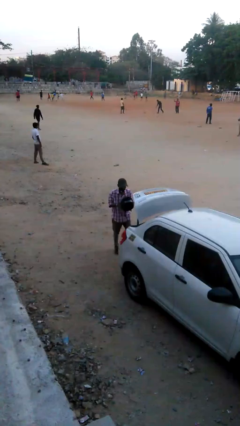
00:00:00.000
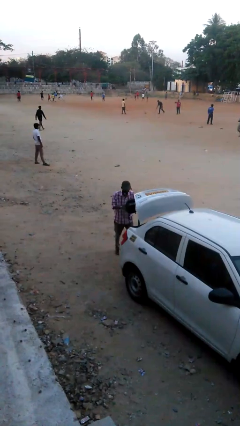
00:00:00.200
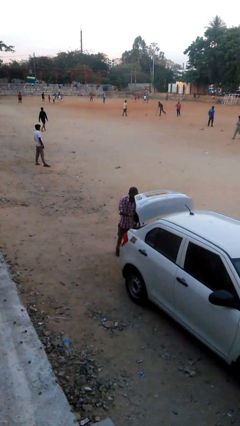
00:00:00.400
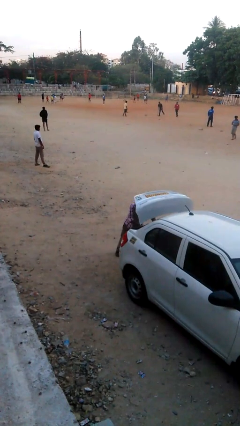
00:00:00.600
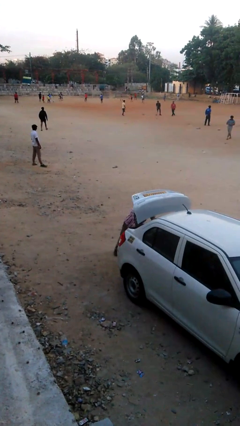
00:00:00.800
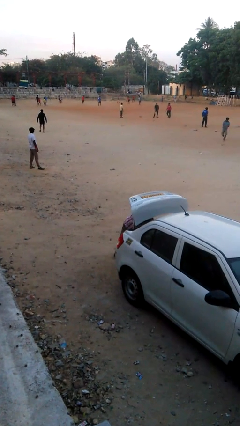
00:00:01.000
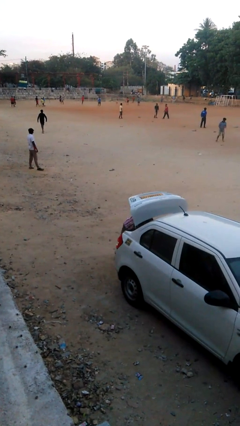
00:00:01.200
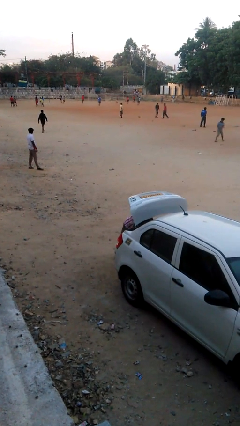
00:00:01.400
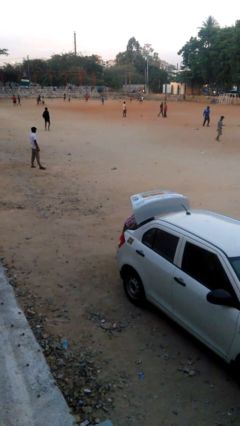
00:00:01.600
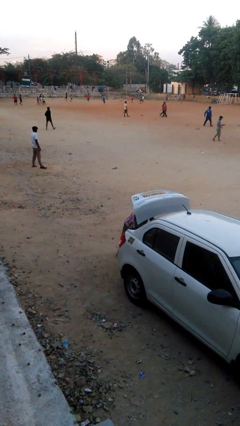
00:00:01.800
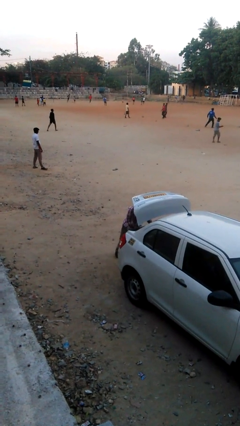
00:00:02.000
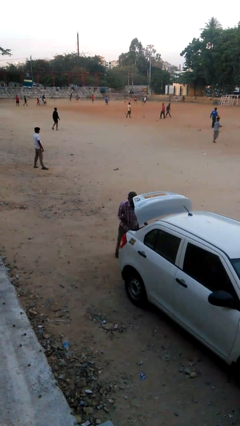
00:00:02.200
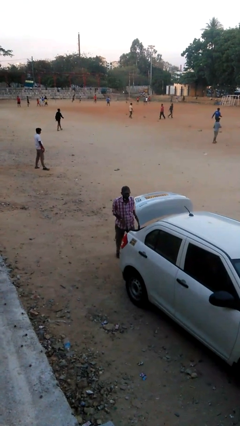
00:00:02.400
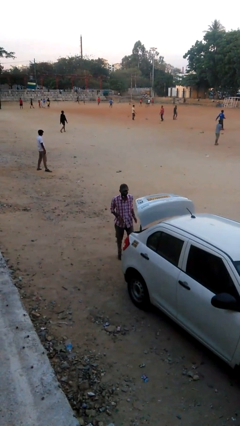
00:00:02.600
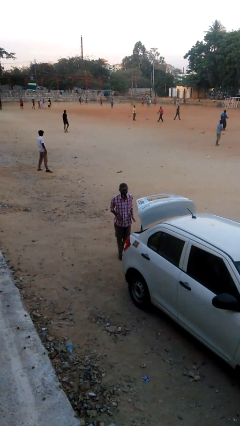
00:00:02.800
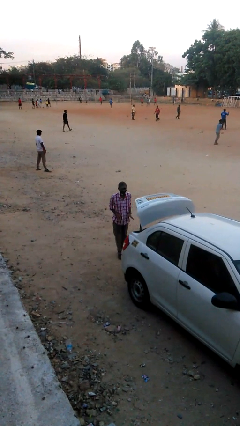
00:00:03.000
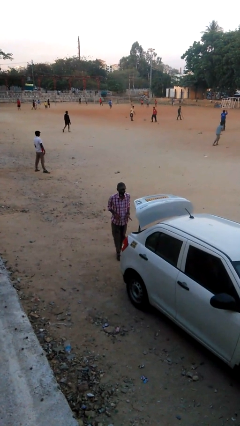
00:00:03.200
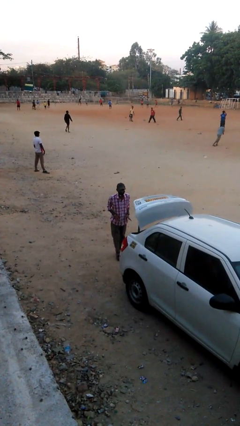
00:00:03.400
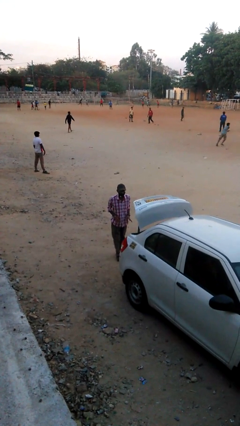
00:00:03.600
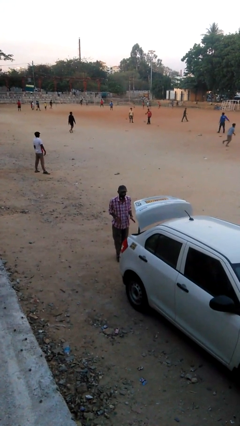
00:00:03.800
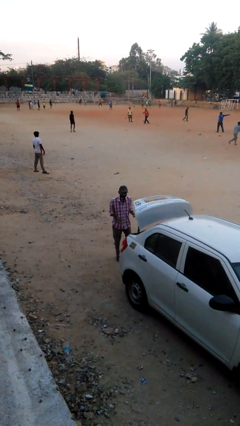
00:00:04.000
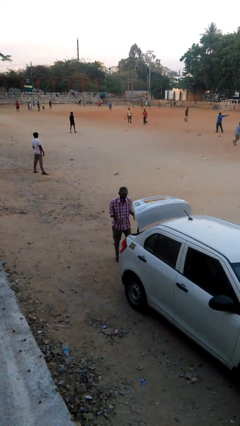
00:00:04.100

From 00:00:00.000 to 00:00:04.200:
person loads car

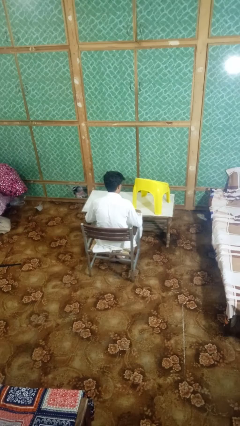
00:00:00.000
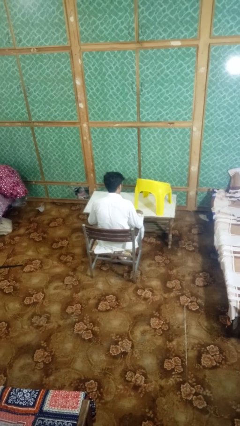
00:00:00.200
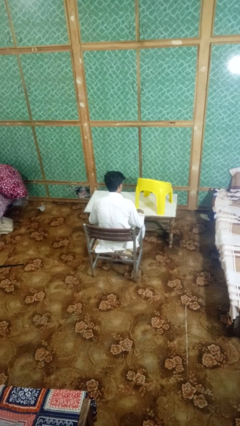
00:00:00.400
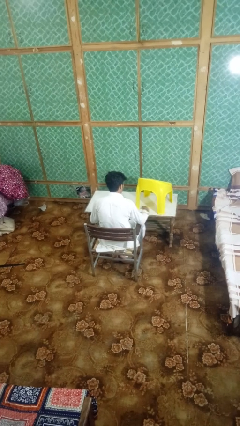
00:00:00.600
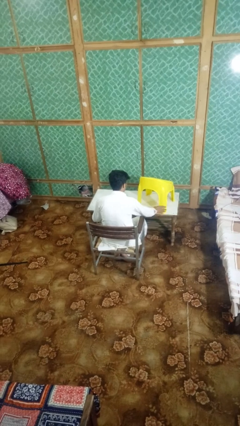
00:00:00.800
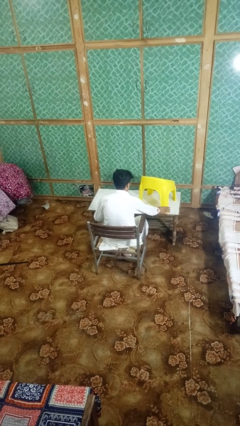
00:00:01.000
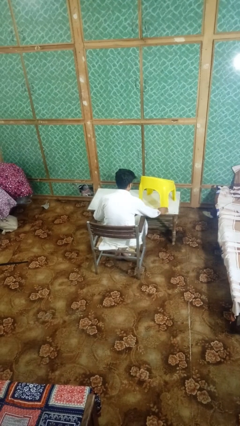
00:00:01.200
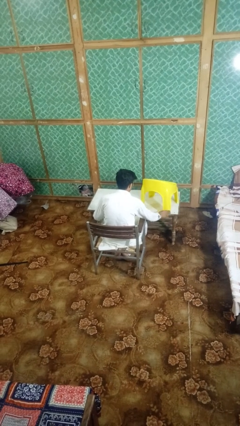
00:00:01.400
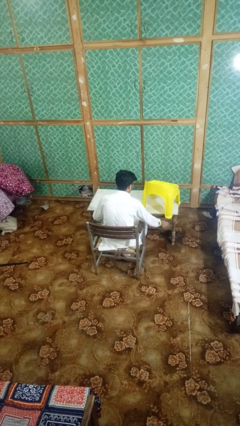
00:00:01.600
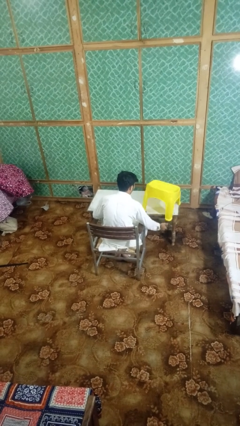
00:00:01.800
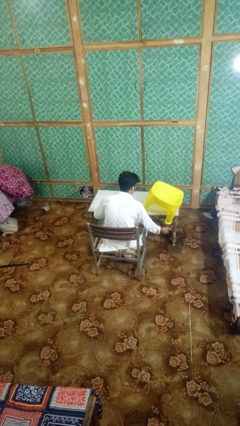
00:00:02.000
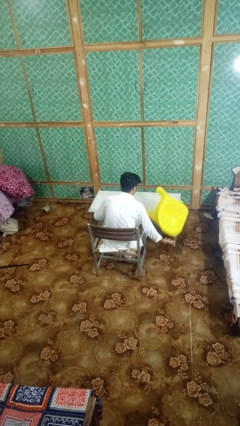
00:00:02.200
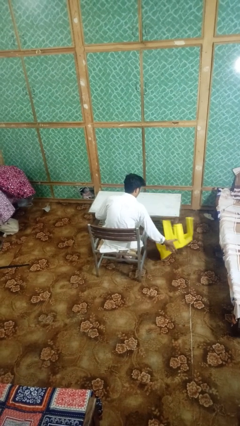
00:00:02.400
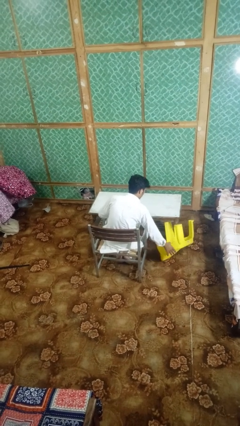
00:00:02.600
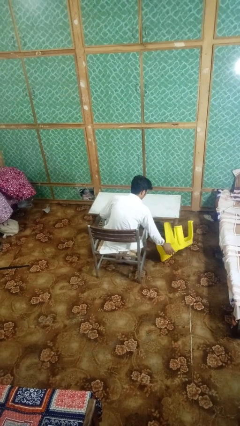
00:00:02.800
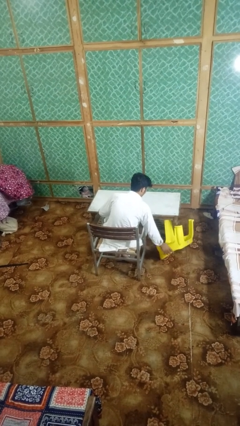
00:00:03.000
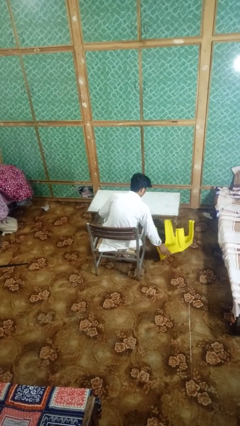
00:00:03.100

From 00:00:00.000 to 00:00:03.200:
person knocks over furniture

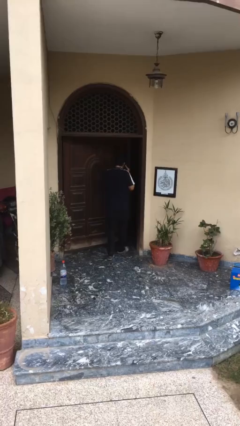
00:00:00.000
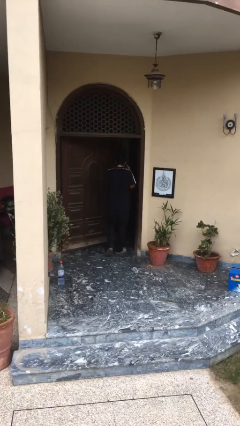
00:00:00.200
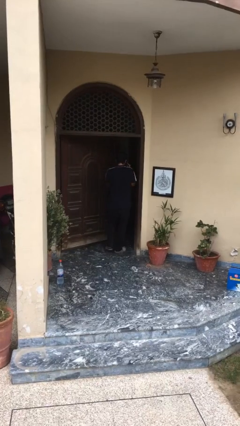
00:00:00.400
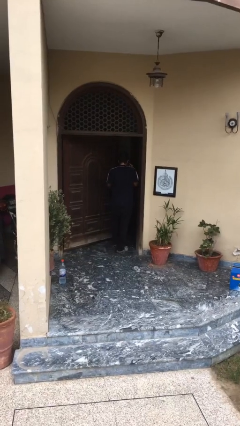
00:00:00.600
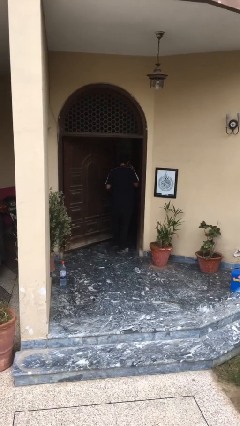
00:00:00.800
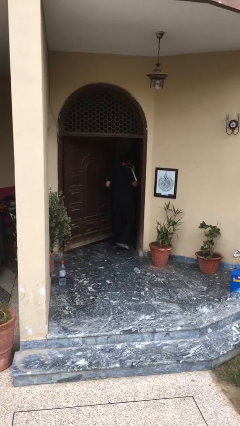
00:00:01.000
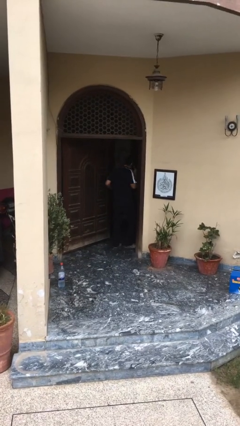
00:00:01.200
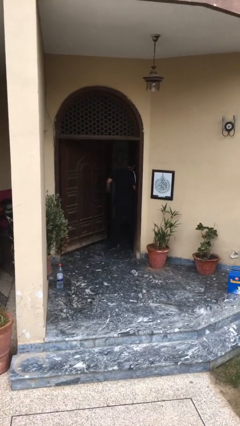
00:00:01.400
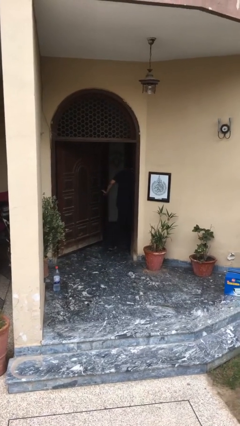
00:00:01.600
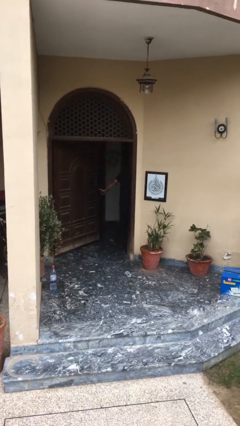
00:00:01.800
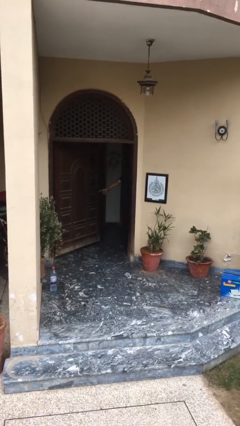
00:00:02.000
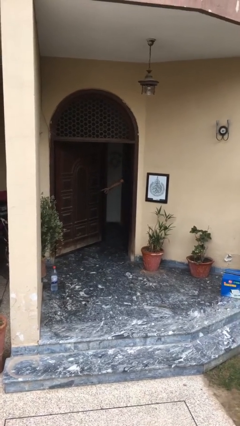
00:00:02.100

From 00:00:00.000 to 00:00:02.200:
person exits scene through structure

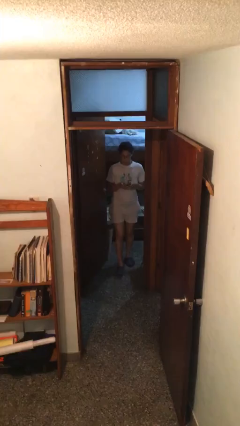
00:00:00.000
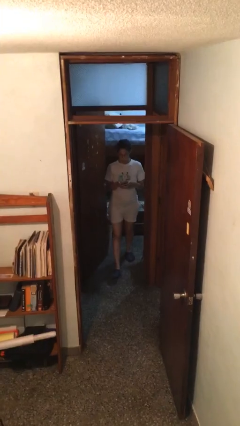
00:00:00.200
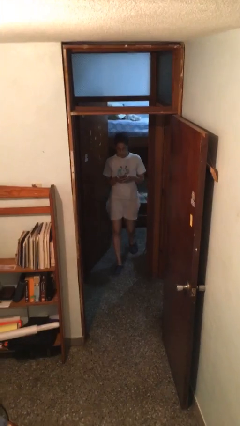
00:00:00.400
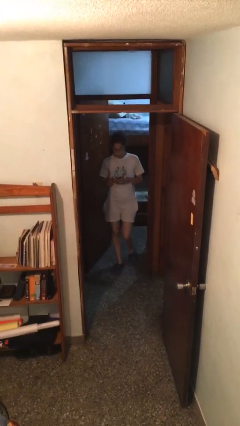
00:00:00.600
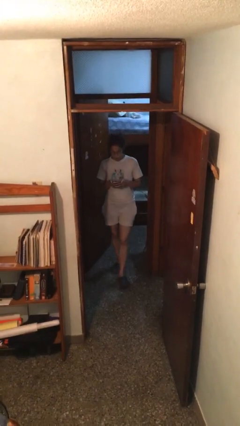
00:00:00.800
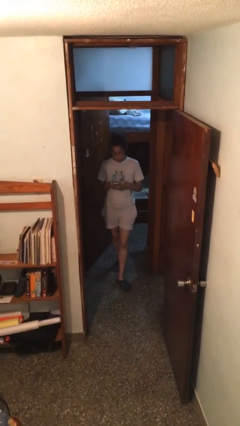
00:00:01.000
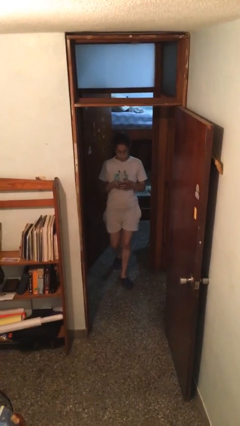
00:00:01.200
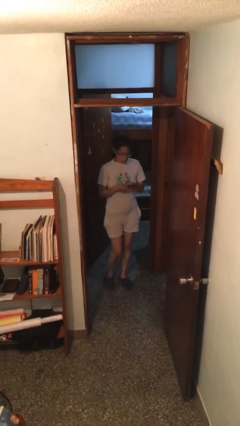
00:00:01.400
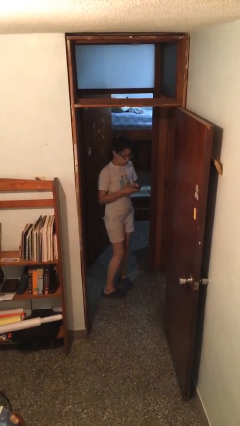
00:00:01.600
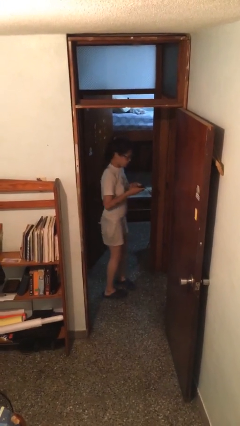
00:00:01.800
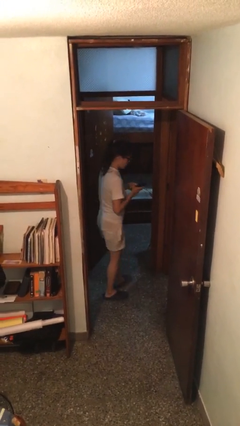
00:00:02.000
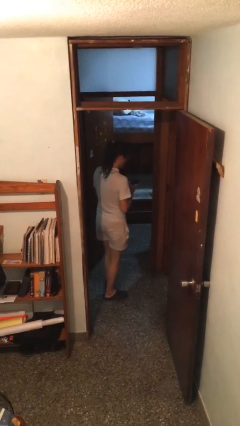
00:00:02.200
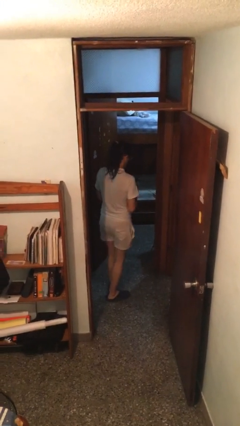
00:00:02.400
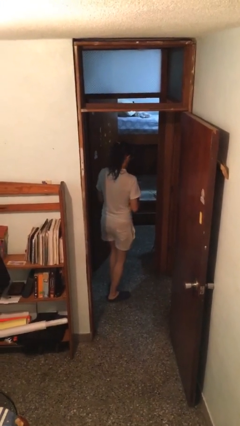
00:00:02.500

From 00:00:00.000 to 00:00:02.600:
person enters scene through structure

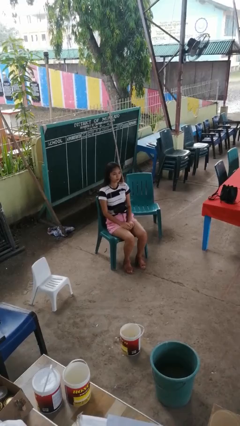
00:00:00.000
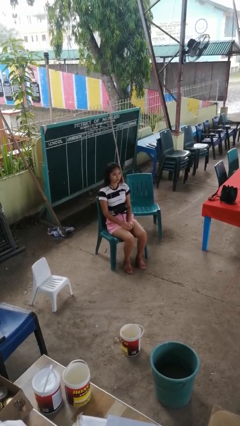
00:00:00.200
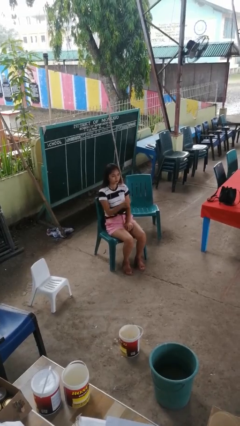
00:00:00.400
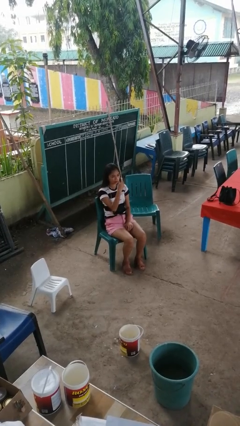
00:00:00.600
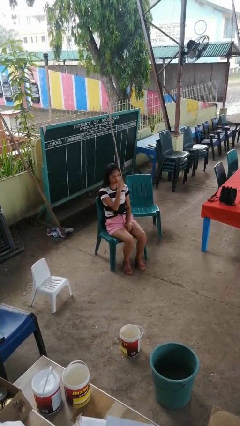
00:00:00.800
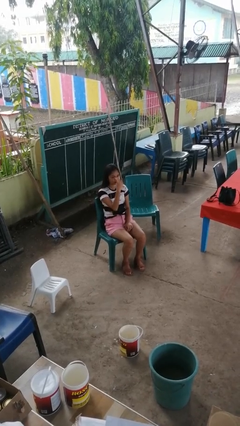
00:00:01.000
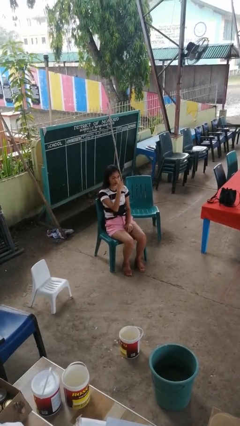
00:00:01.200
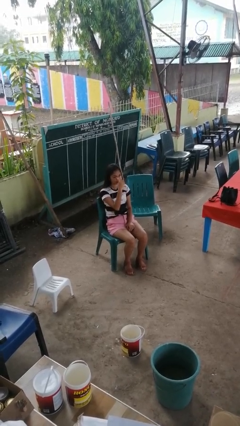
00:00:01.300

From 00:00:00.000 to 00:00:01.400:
person gestures watch closely

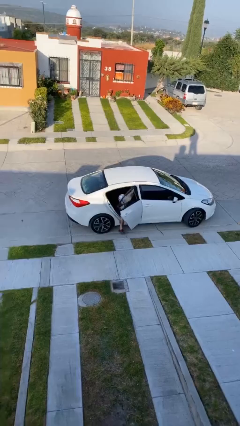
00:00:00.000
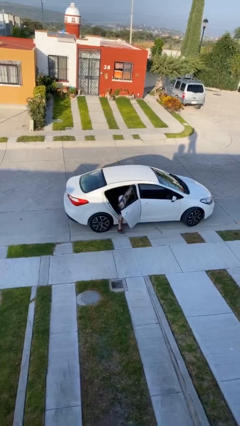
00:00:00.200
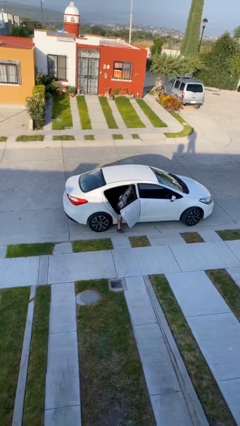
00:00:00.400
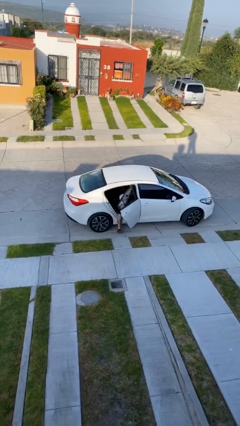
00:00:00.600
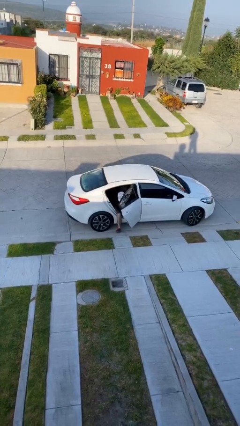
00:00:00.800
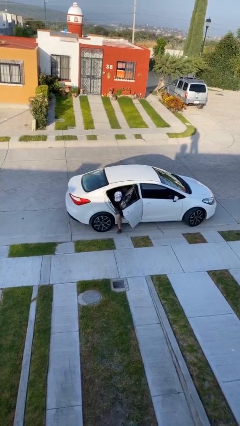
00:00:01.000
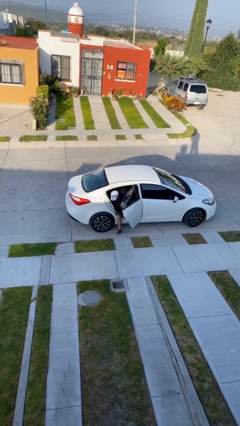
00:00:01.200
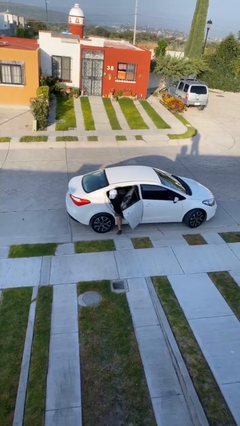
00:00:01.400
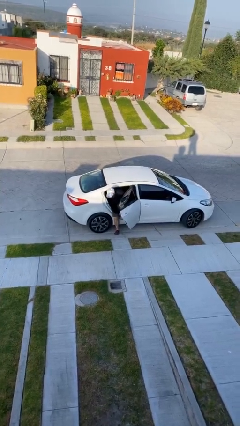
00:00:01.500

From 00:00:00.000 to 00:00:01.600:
person opens car door

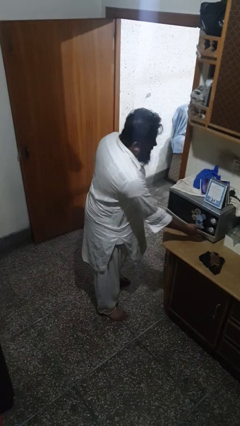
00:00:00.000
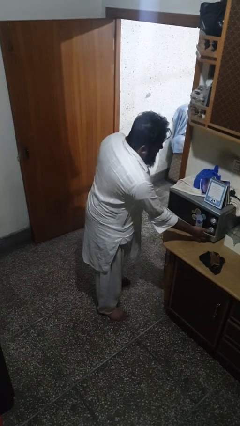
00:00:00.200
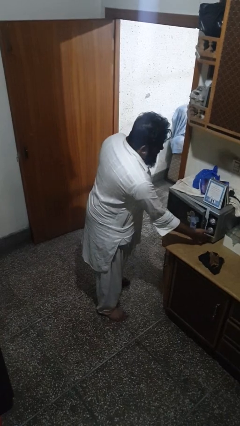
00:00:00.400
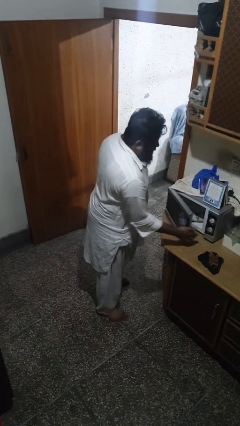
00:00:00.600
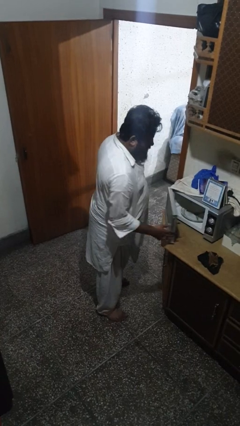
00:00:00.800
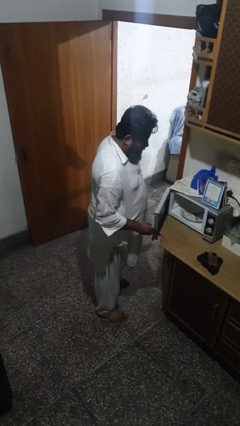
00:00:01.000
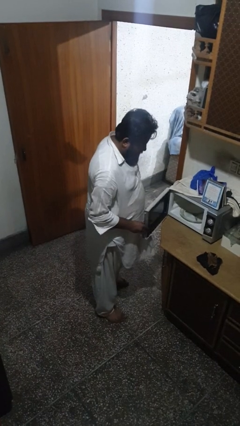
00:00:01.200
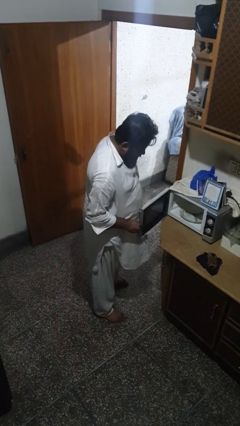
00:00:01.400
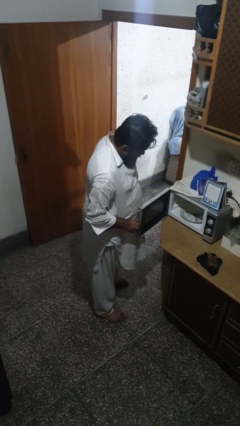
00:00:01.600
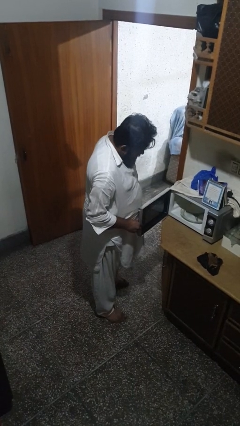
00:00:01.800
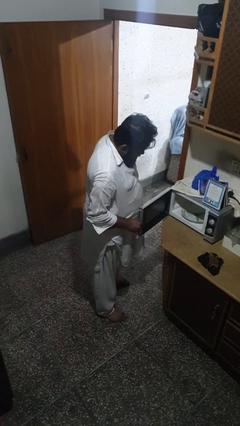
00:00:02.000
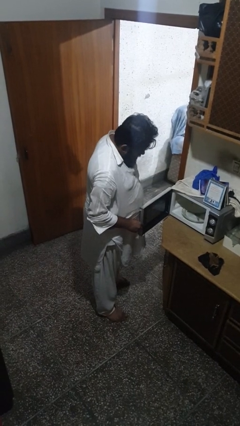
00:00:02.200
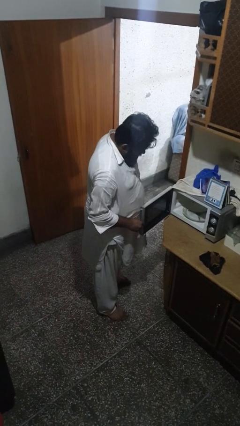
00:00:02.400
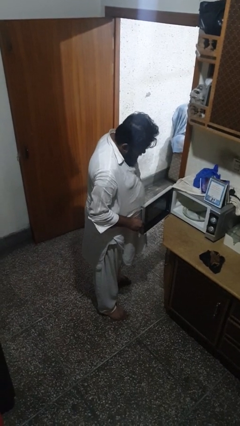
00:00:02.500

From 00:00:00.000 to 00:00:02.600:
person opens oven door
